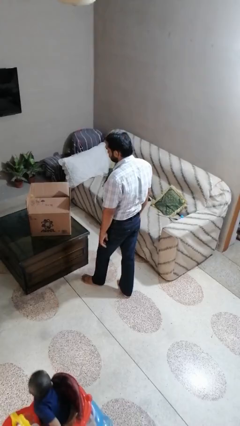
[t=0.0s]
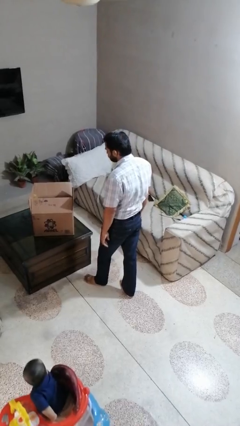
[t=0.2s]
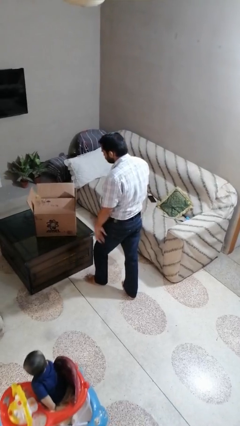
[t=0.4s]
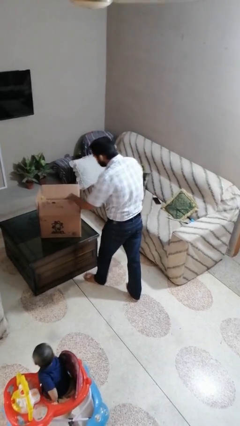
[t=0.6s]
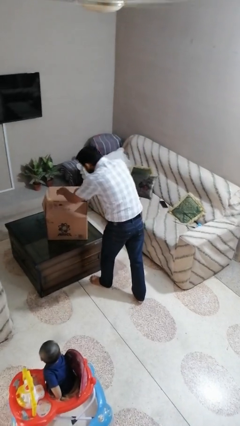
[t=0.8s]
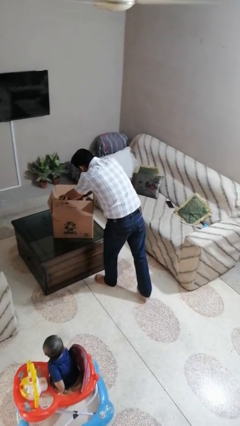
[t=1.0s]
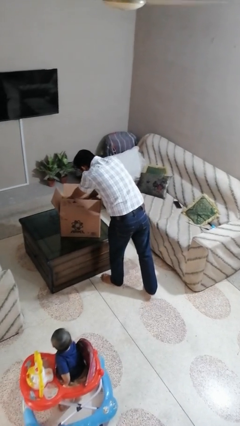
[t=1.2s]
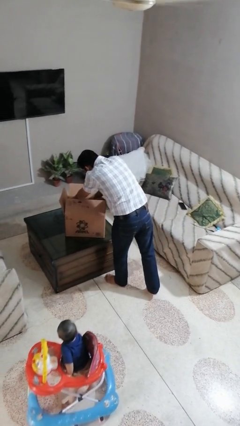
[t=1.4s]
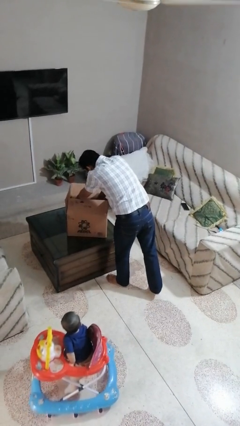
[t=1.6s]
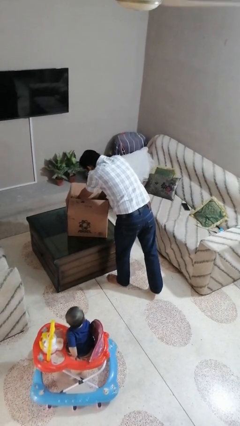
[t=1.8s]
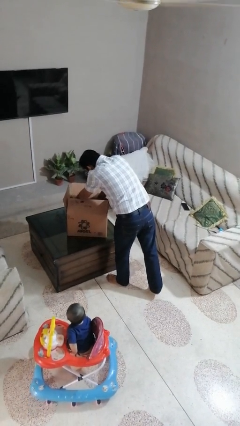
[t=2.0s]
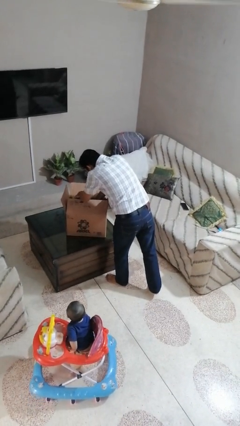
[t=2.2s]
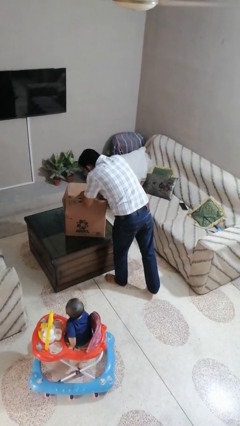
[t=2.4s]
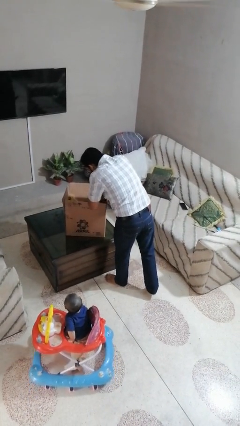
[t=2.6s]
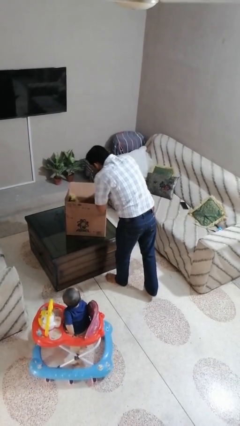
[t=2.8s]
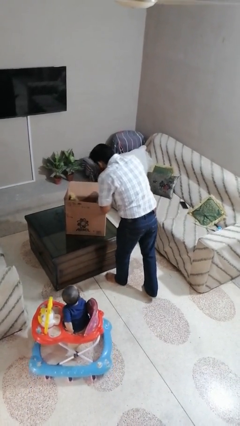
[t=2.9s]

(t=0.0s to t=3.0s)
person searches in box

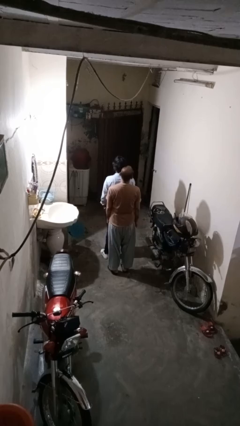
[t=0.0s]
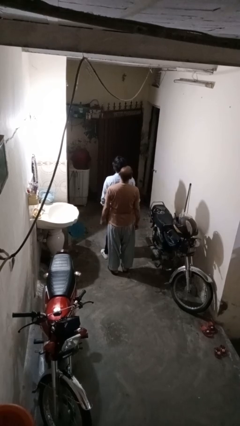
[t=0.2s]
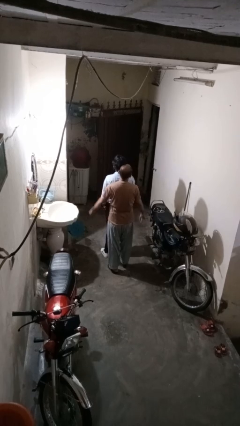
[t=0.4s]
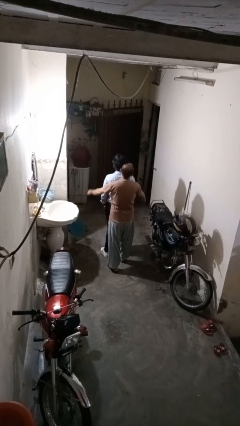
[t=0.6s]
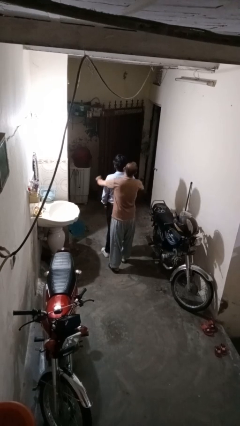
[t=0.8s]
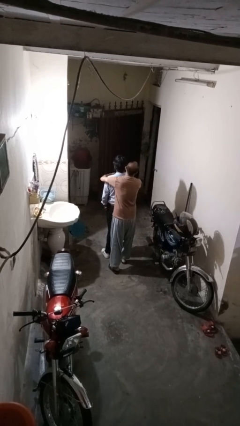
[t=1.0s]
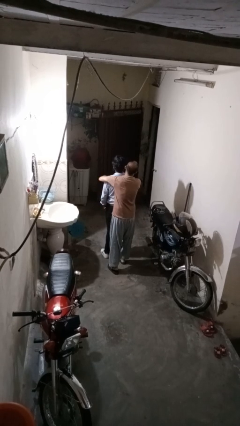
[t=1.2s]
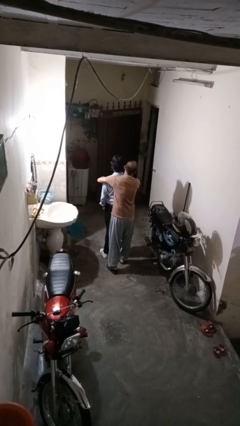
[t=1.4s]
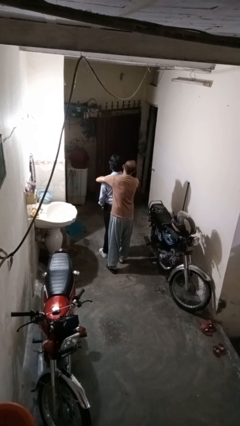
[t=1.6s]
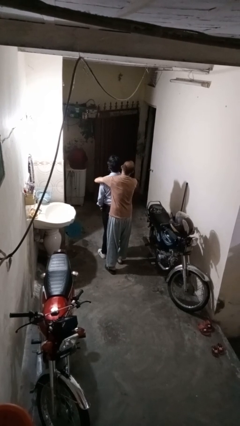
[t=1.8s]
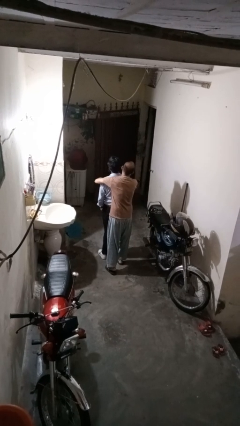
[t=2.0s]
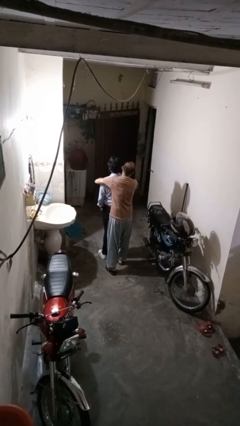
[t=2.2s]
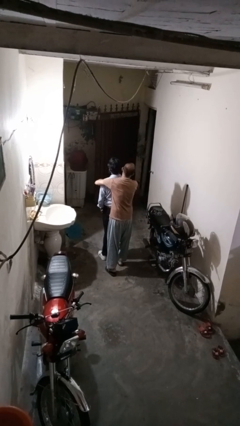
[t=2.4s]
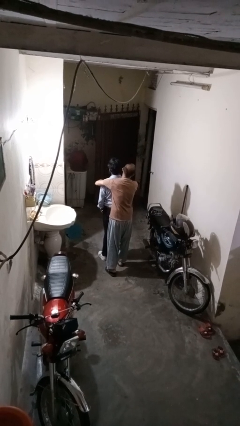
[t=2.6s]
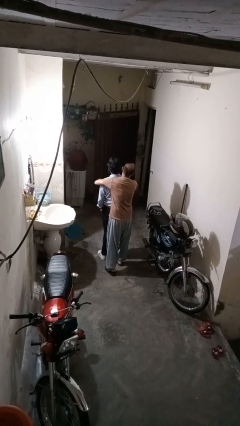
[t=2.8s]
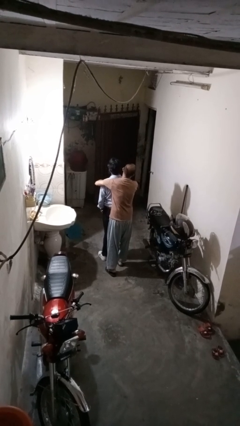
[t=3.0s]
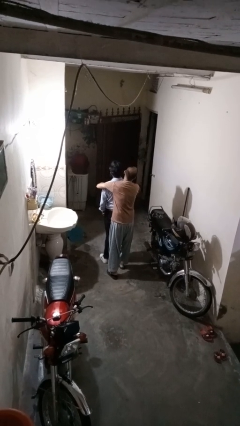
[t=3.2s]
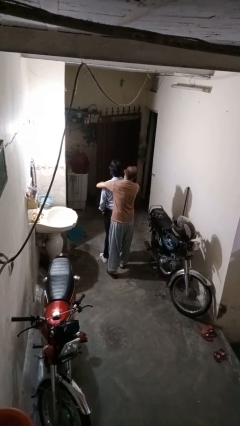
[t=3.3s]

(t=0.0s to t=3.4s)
person hugs person from behind

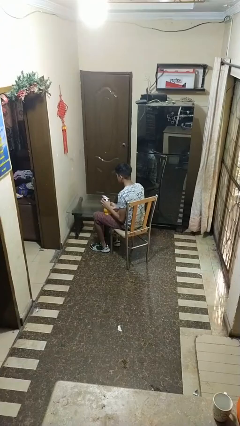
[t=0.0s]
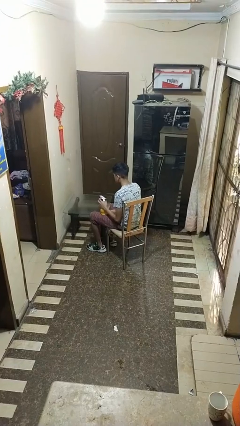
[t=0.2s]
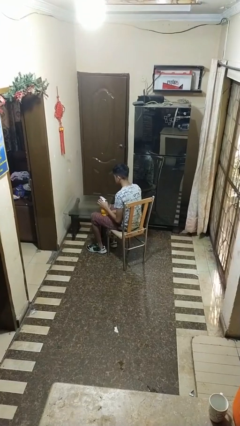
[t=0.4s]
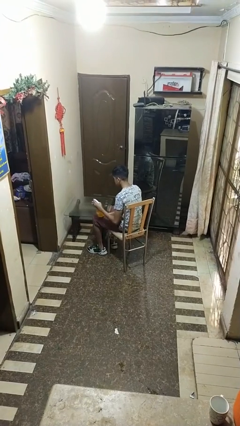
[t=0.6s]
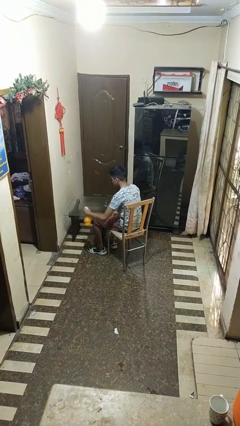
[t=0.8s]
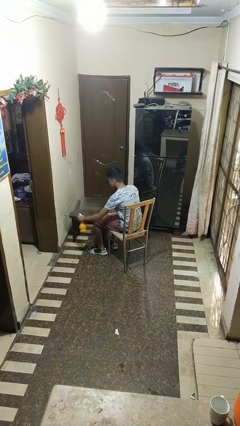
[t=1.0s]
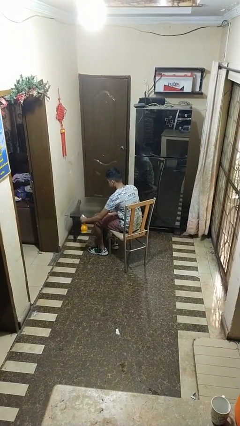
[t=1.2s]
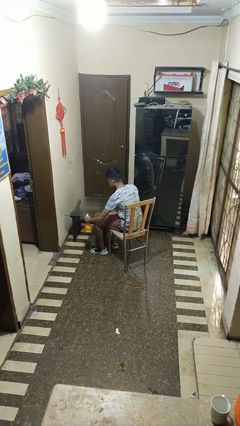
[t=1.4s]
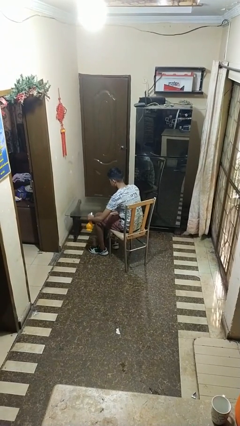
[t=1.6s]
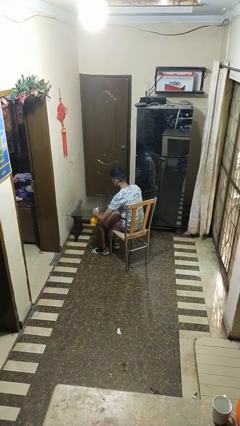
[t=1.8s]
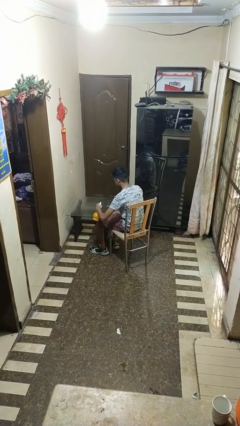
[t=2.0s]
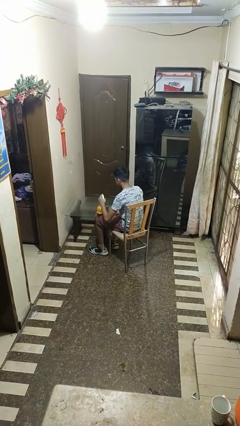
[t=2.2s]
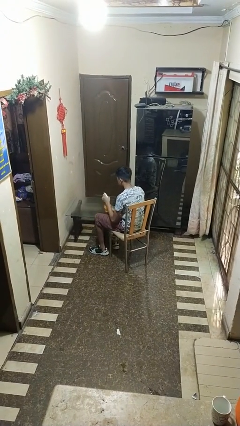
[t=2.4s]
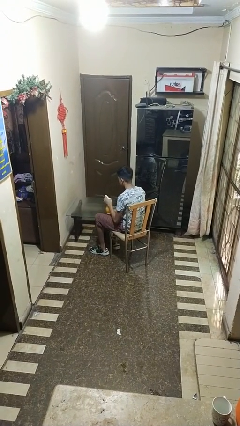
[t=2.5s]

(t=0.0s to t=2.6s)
person sprays from bottle

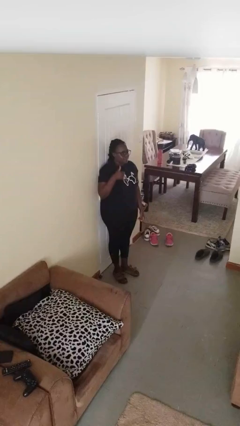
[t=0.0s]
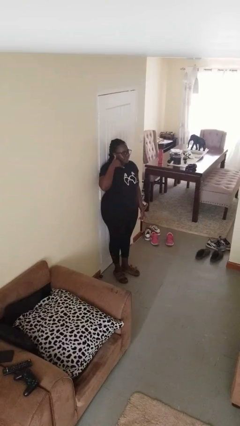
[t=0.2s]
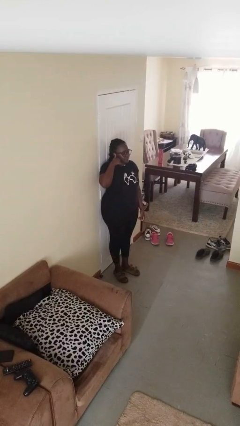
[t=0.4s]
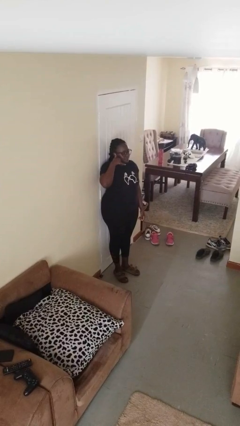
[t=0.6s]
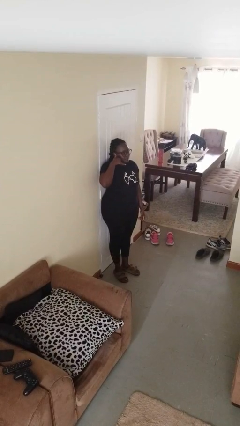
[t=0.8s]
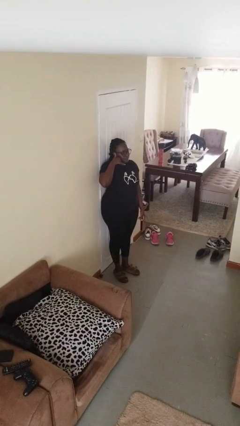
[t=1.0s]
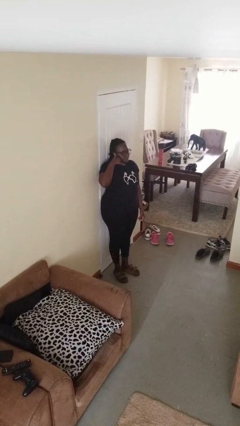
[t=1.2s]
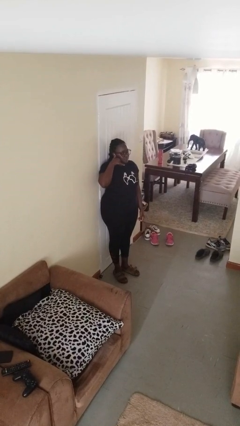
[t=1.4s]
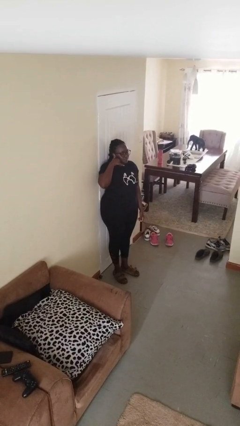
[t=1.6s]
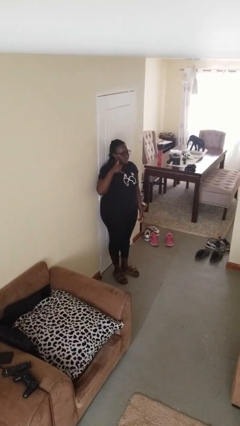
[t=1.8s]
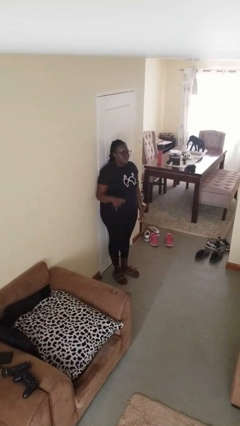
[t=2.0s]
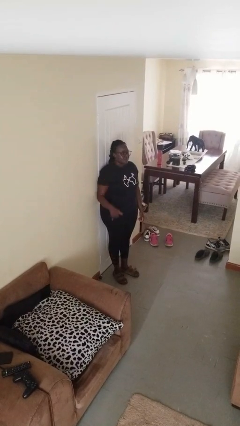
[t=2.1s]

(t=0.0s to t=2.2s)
person gestures call me

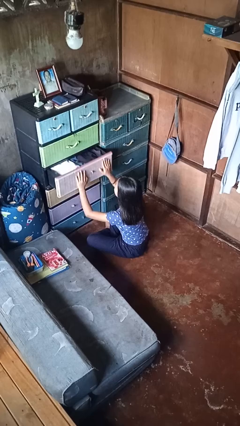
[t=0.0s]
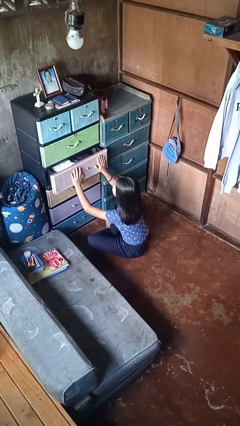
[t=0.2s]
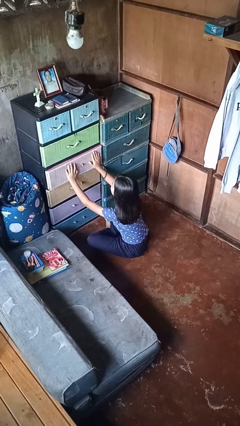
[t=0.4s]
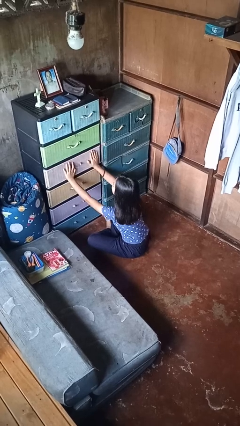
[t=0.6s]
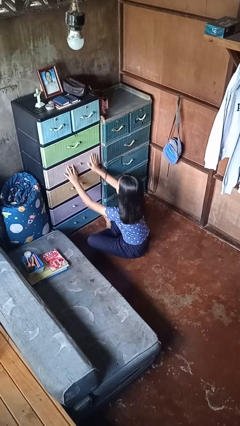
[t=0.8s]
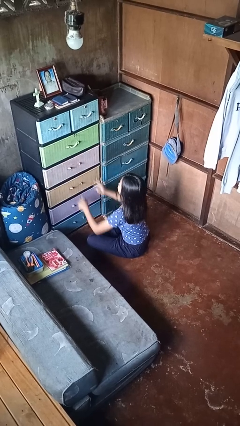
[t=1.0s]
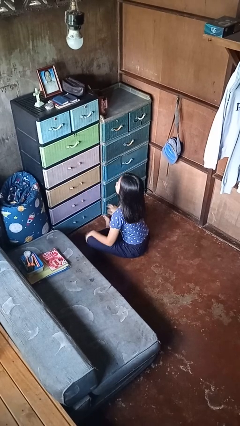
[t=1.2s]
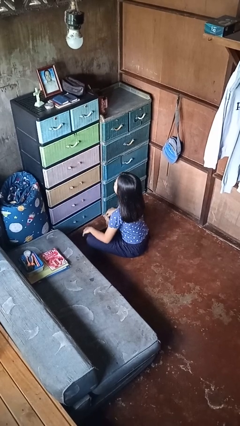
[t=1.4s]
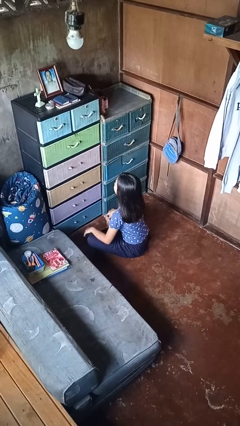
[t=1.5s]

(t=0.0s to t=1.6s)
person closes dresser drawer

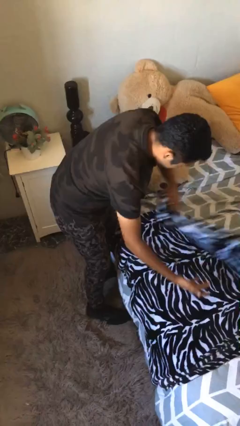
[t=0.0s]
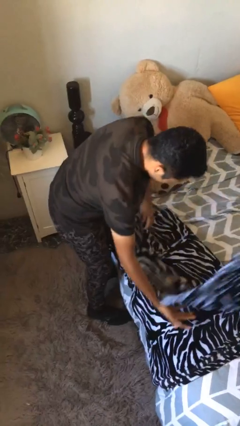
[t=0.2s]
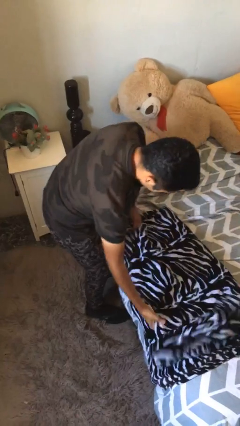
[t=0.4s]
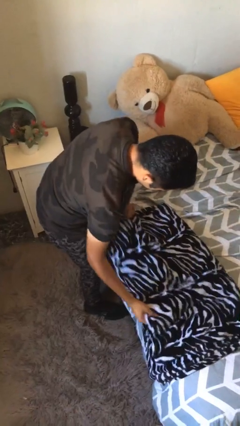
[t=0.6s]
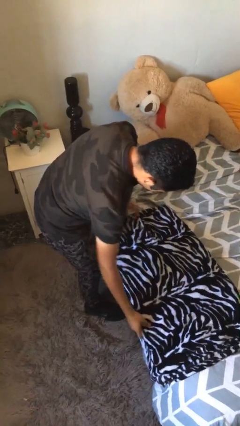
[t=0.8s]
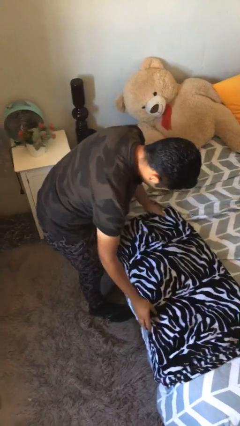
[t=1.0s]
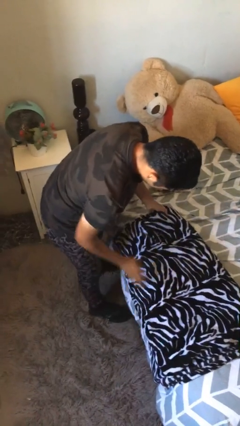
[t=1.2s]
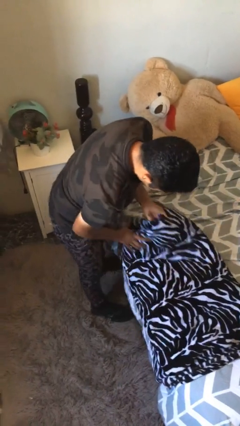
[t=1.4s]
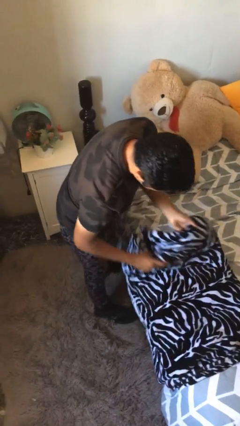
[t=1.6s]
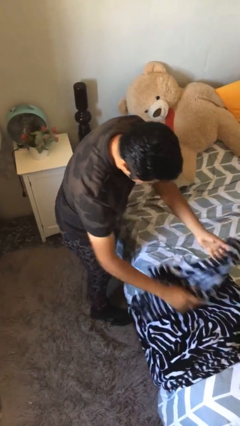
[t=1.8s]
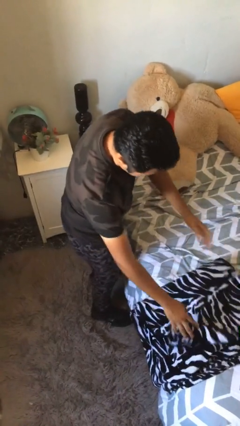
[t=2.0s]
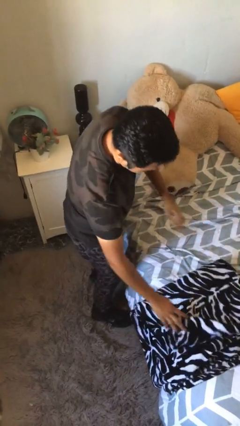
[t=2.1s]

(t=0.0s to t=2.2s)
person folds blanket

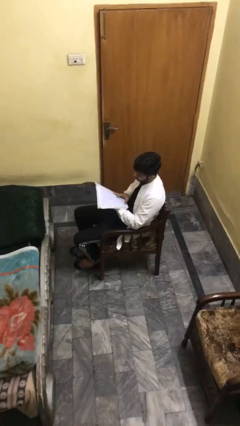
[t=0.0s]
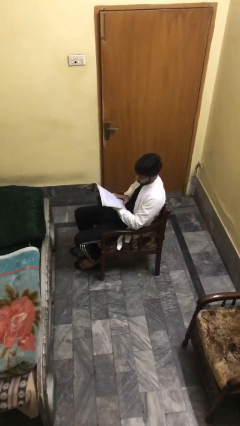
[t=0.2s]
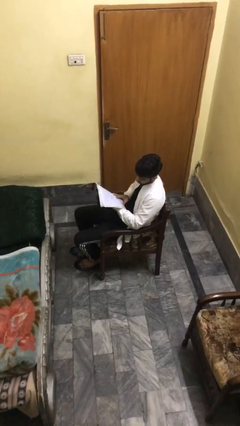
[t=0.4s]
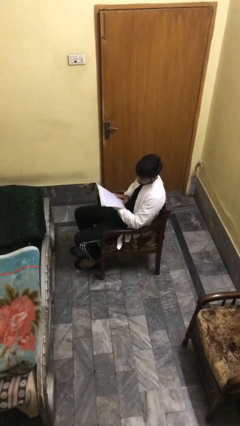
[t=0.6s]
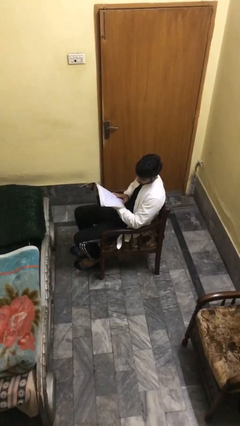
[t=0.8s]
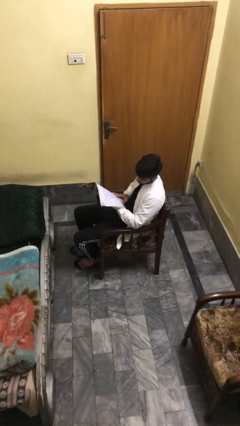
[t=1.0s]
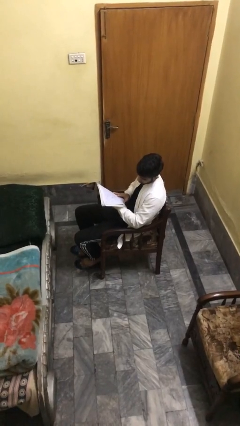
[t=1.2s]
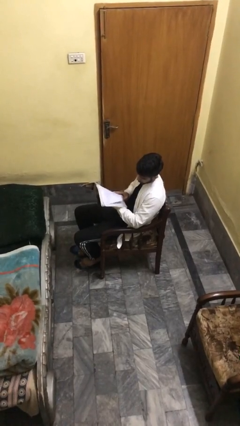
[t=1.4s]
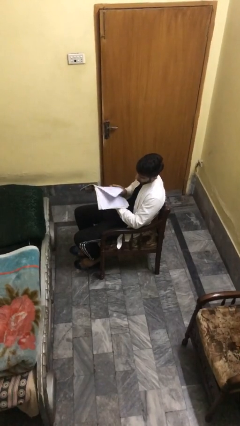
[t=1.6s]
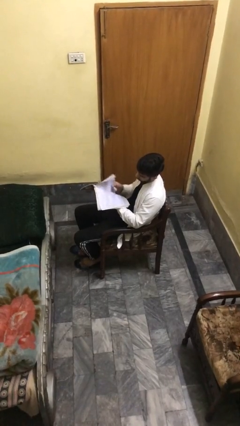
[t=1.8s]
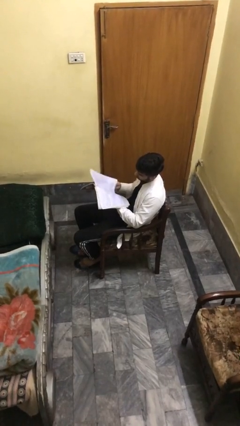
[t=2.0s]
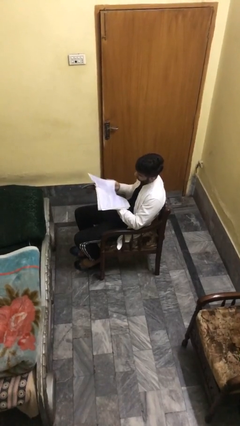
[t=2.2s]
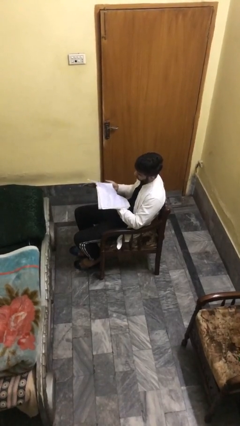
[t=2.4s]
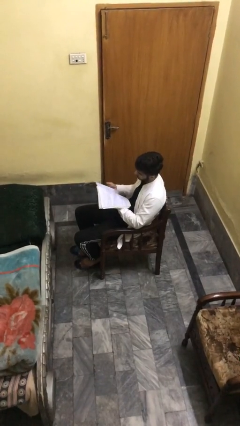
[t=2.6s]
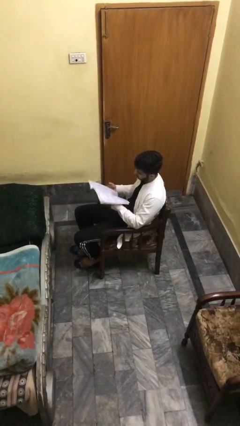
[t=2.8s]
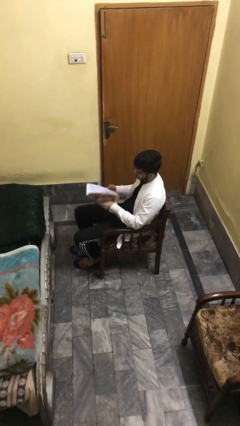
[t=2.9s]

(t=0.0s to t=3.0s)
person reads document
